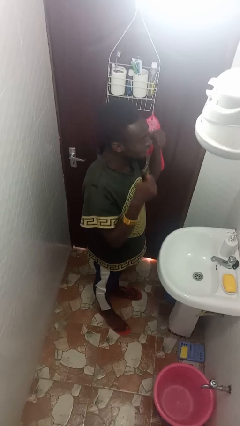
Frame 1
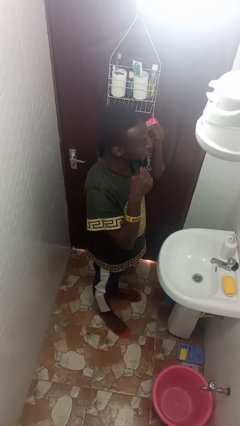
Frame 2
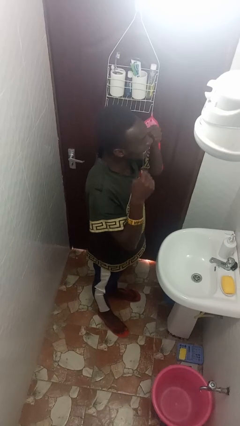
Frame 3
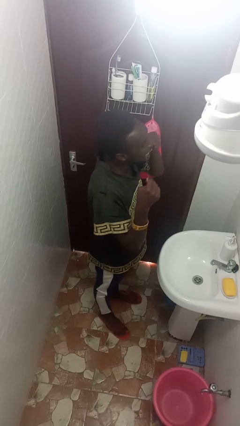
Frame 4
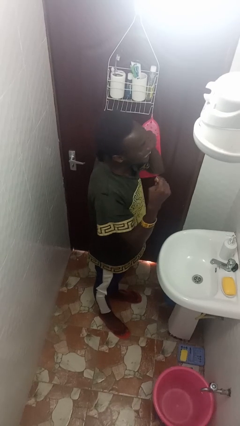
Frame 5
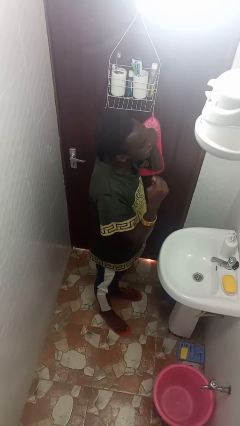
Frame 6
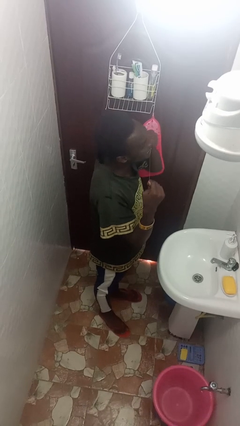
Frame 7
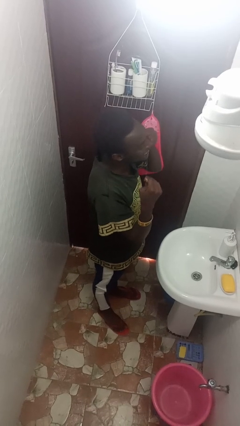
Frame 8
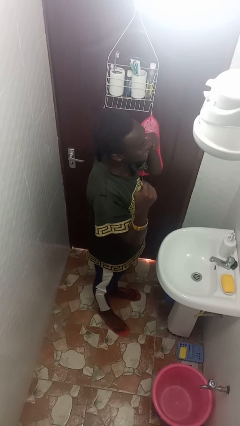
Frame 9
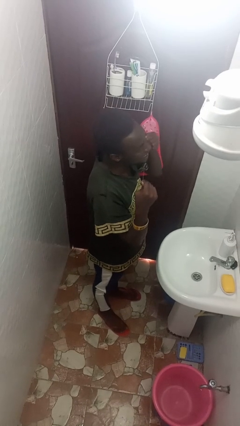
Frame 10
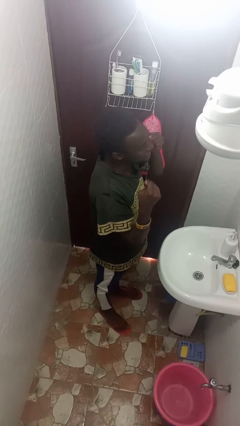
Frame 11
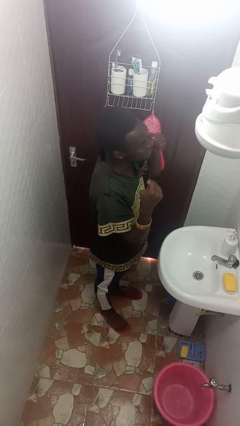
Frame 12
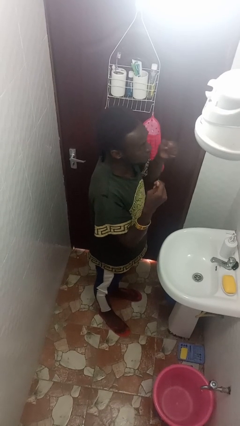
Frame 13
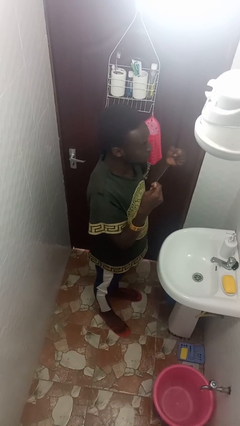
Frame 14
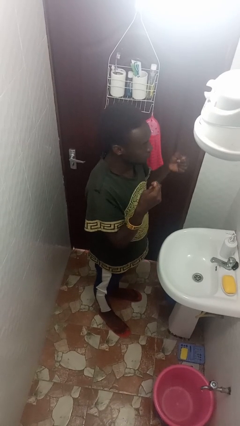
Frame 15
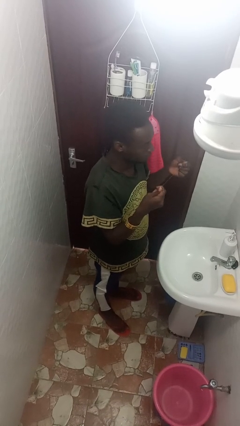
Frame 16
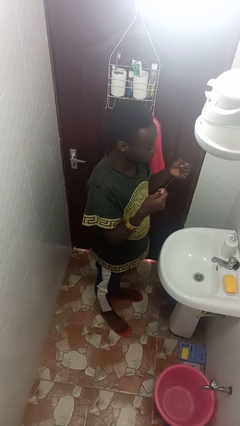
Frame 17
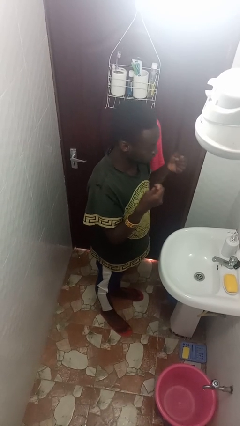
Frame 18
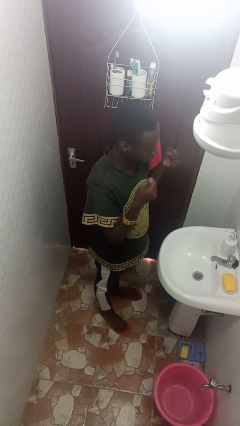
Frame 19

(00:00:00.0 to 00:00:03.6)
person flosses

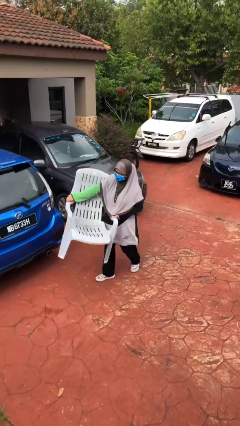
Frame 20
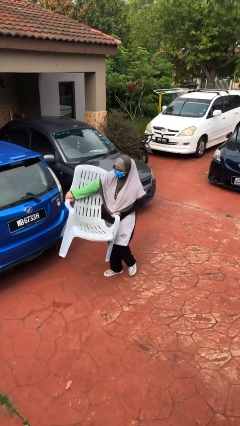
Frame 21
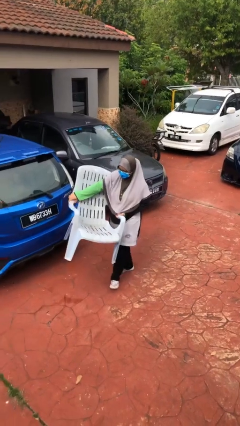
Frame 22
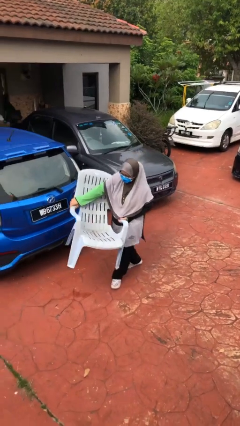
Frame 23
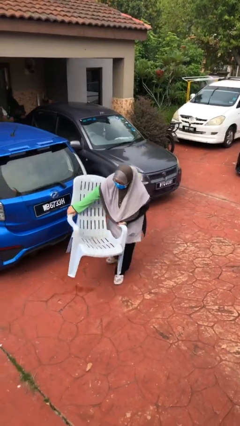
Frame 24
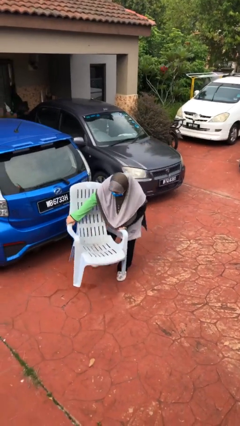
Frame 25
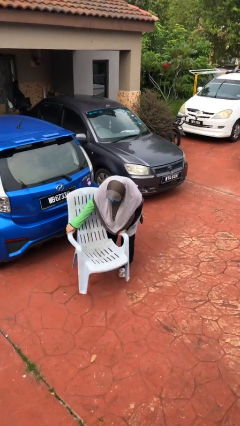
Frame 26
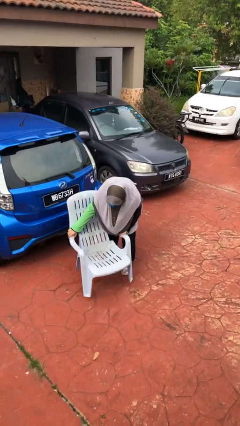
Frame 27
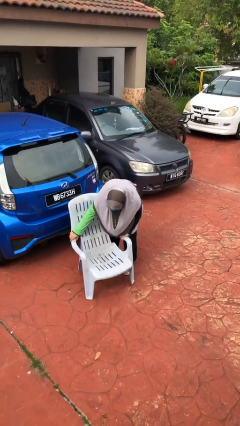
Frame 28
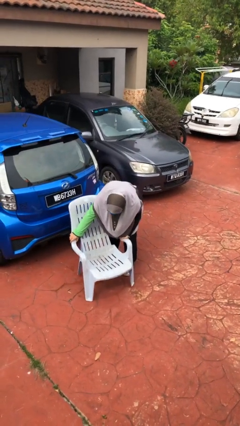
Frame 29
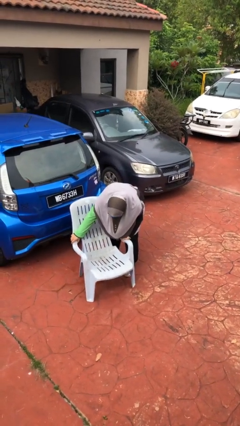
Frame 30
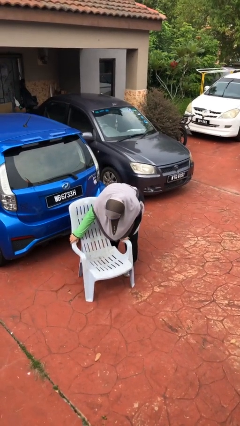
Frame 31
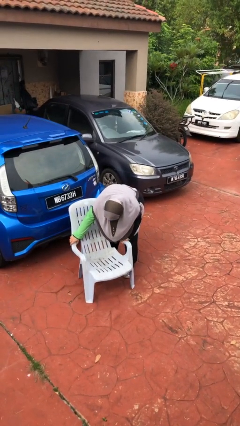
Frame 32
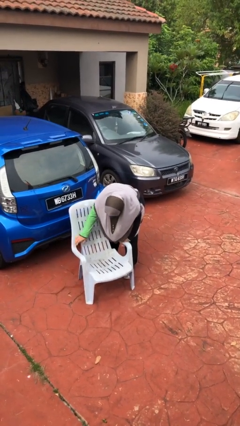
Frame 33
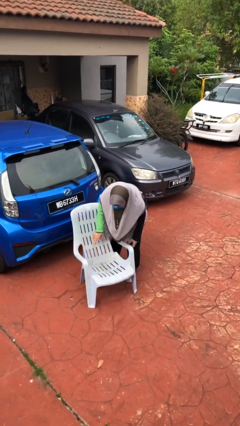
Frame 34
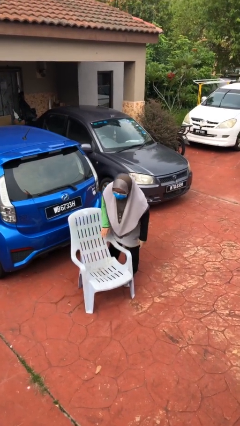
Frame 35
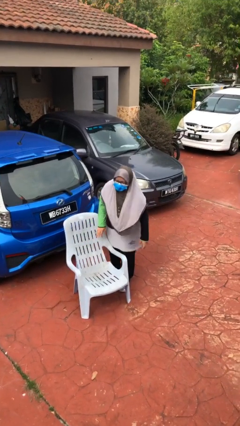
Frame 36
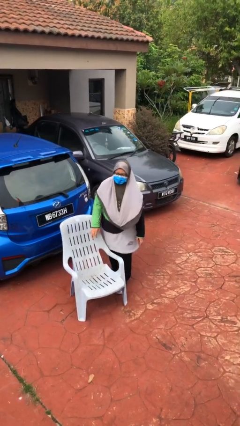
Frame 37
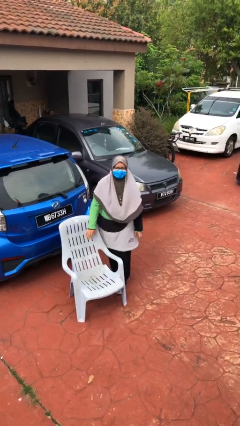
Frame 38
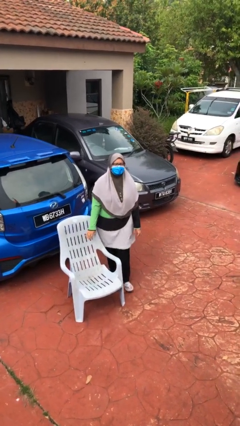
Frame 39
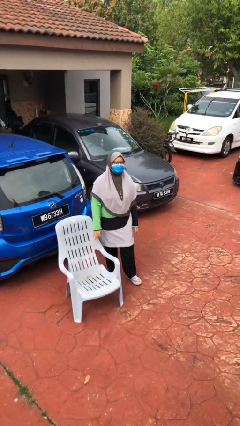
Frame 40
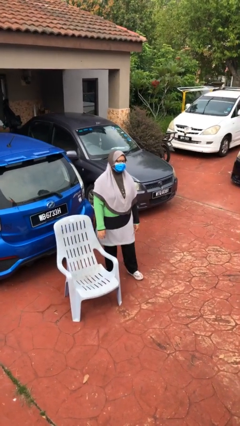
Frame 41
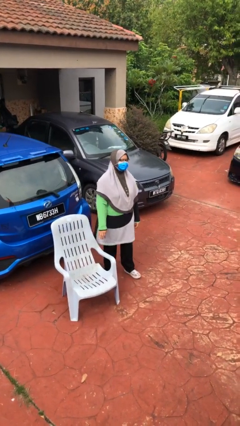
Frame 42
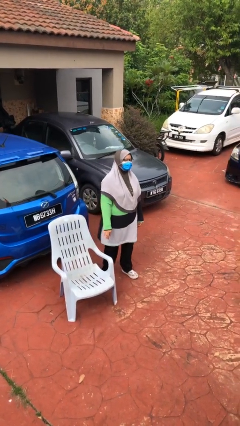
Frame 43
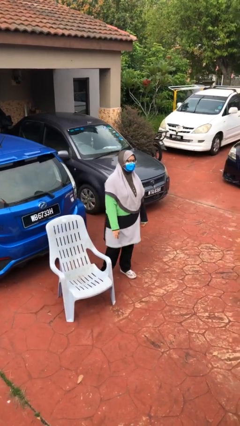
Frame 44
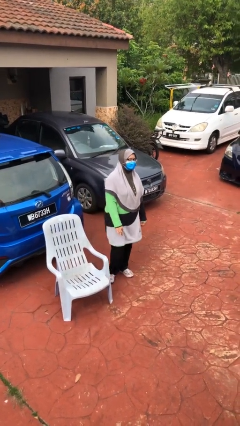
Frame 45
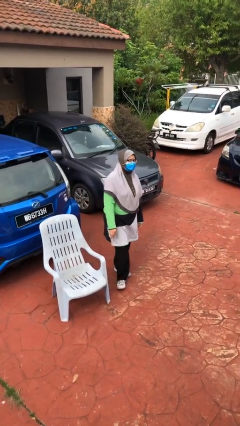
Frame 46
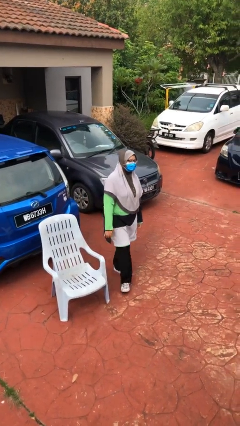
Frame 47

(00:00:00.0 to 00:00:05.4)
person puts down object on floor

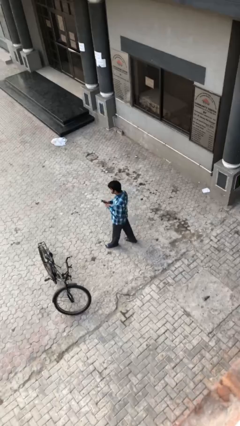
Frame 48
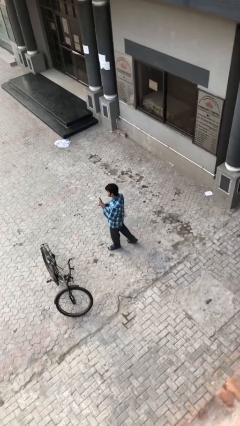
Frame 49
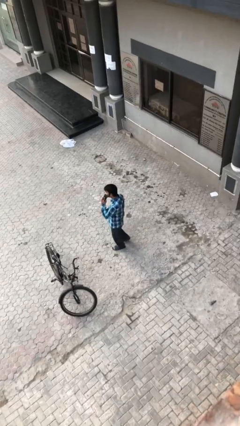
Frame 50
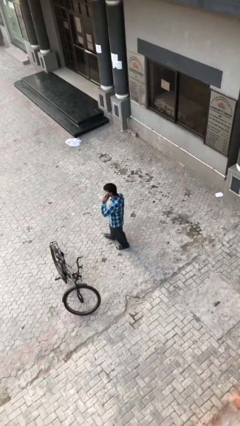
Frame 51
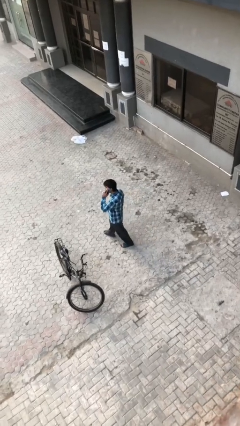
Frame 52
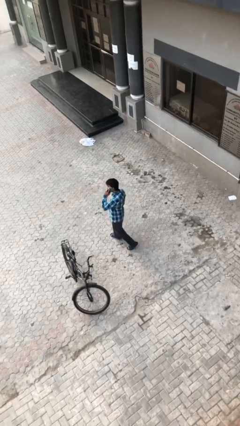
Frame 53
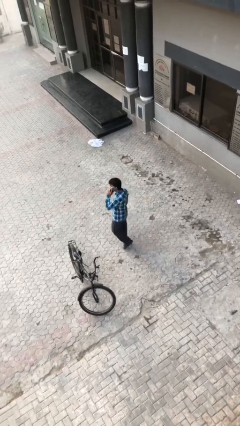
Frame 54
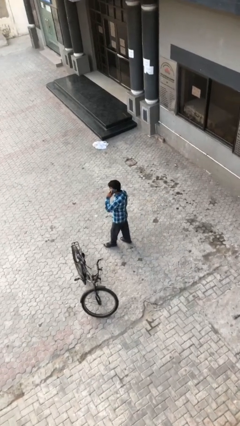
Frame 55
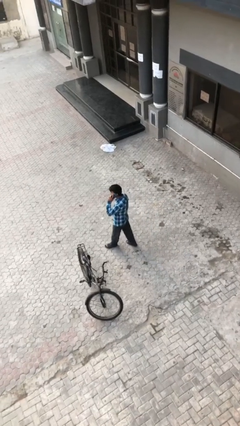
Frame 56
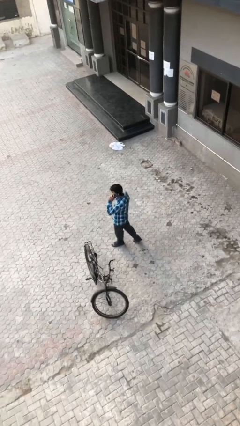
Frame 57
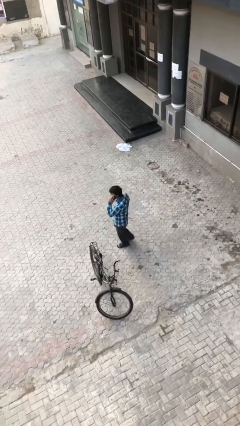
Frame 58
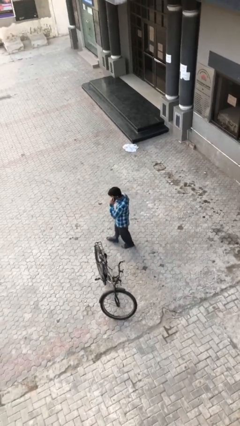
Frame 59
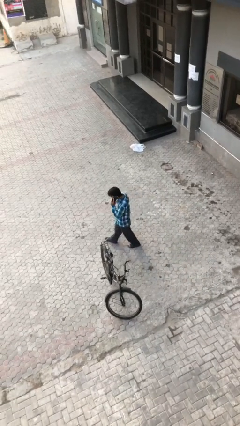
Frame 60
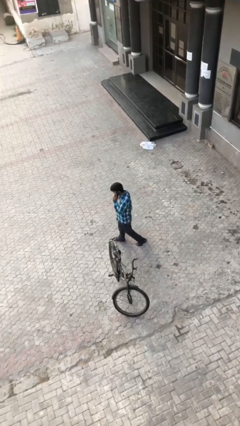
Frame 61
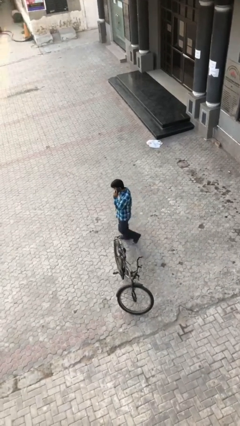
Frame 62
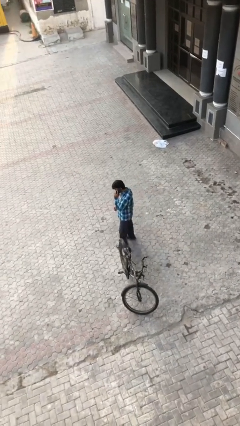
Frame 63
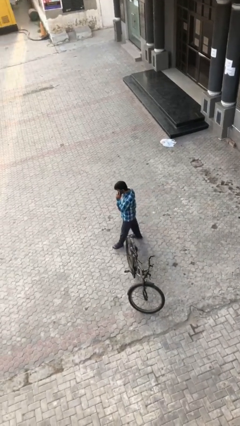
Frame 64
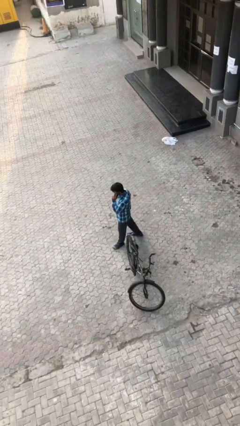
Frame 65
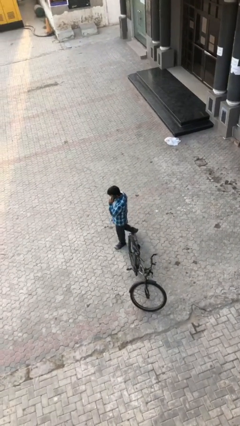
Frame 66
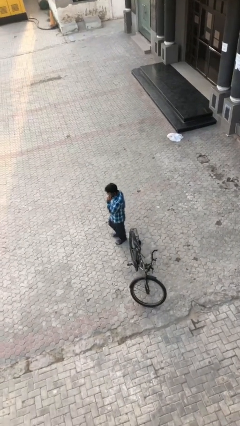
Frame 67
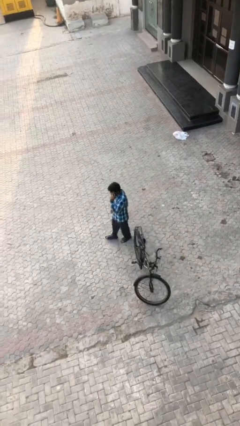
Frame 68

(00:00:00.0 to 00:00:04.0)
person talks on phone

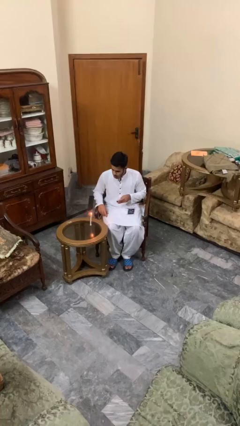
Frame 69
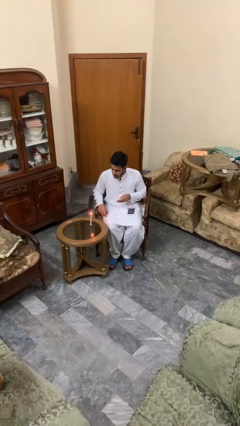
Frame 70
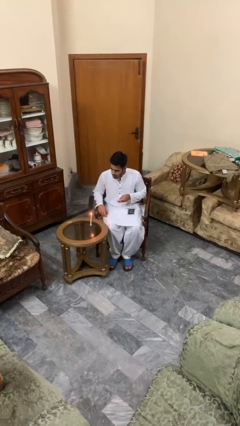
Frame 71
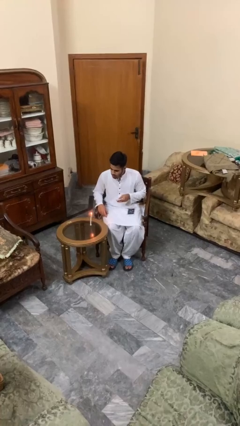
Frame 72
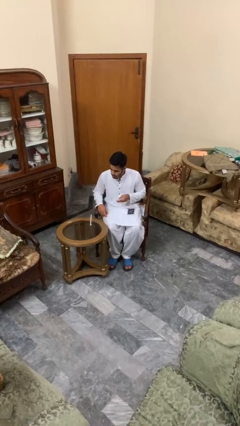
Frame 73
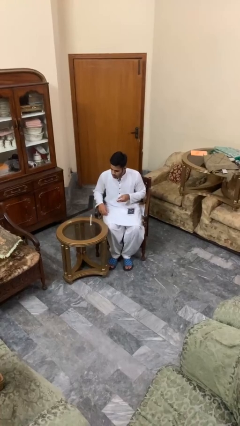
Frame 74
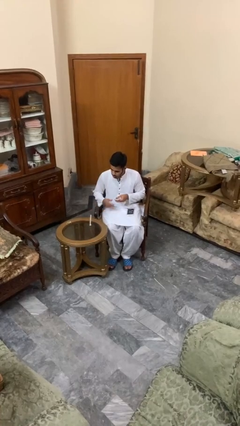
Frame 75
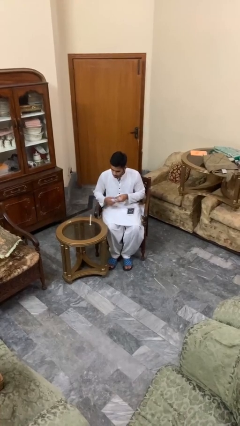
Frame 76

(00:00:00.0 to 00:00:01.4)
person extinguishes candle

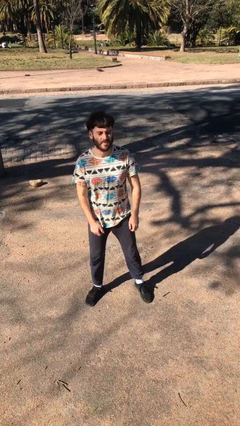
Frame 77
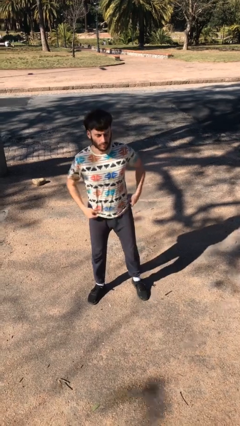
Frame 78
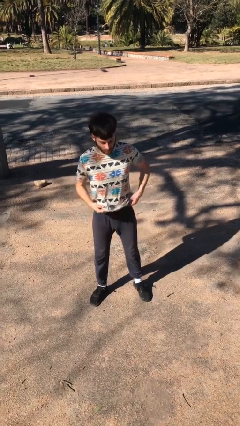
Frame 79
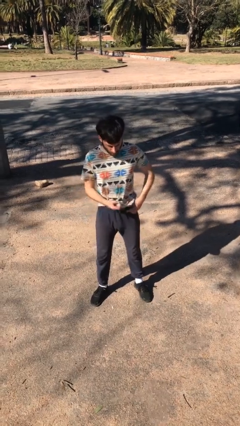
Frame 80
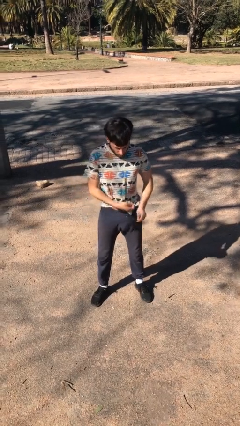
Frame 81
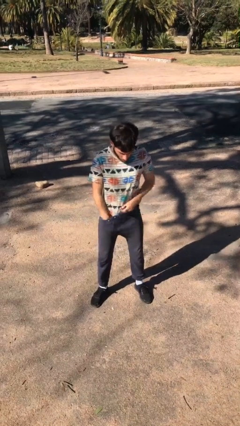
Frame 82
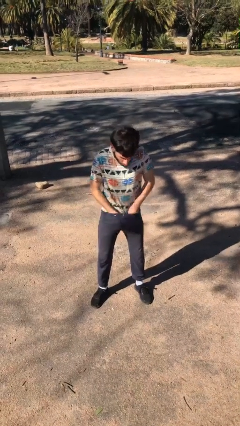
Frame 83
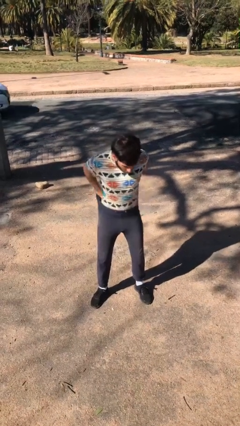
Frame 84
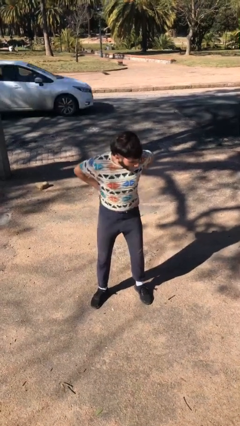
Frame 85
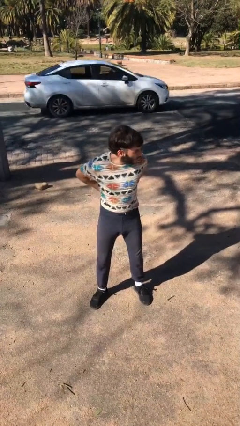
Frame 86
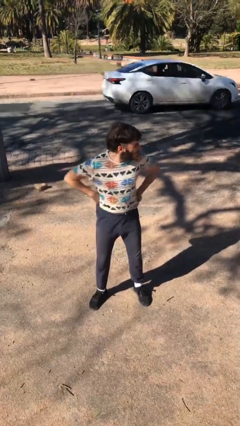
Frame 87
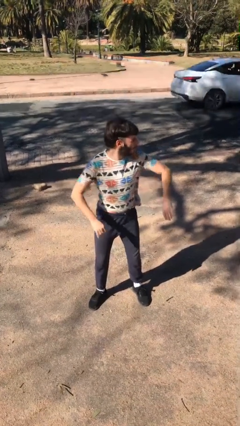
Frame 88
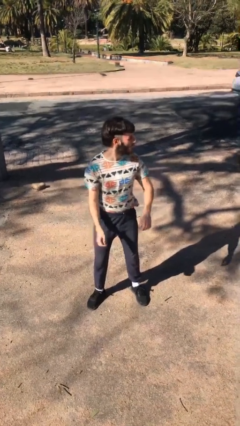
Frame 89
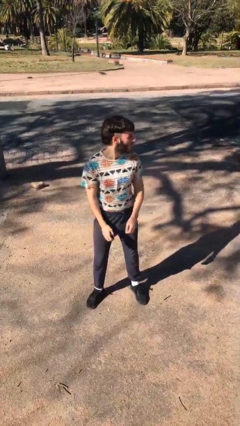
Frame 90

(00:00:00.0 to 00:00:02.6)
person tucks in shirt

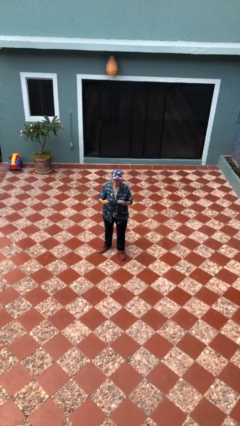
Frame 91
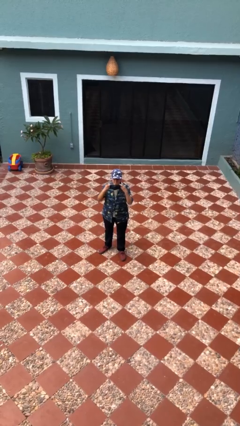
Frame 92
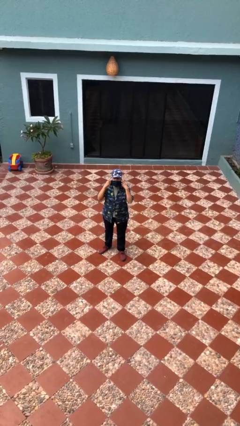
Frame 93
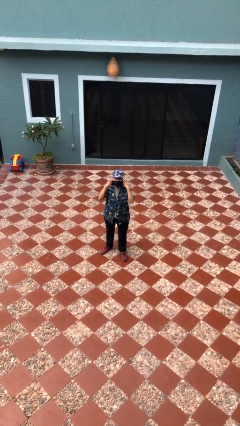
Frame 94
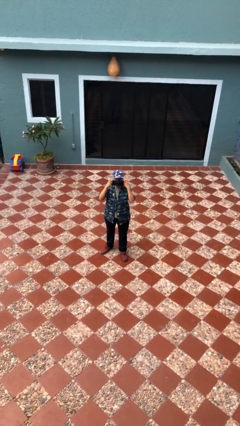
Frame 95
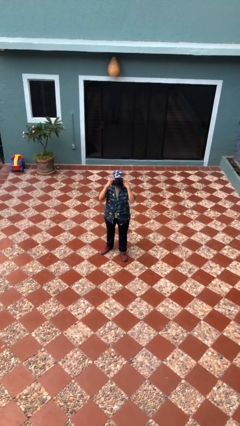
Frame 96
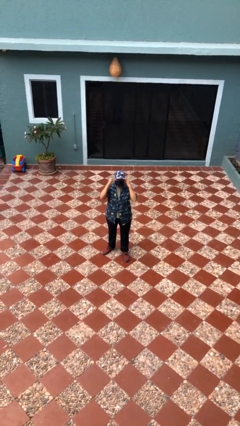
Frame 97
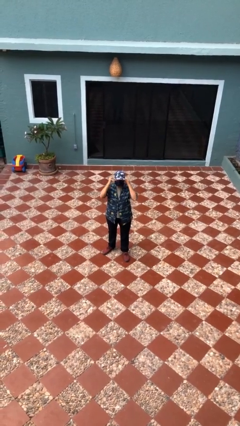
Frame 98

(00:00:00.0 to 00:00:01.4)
person puts on facemask
